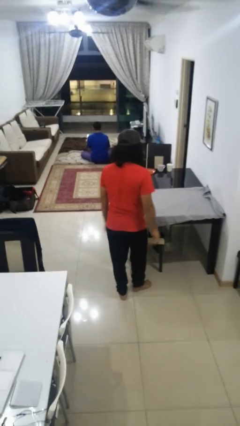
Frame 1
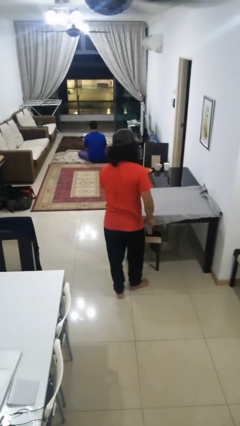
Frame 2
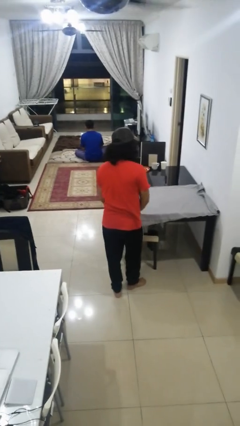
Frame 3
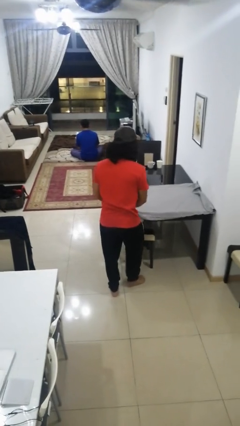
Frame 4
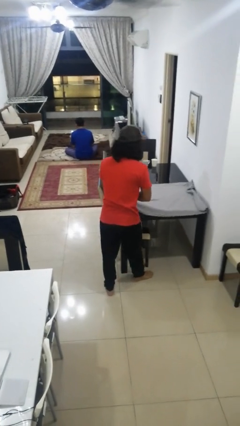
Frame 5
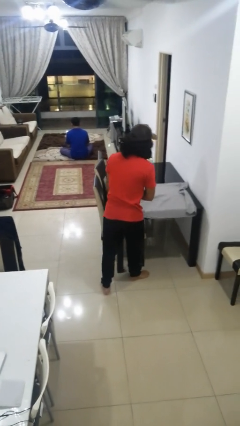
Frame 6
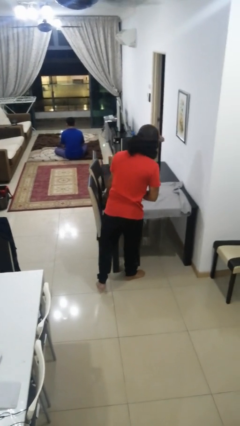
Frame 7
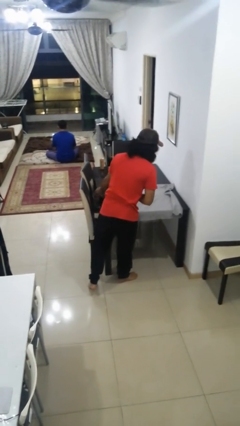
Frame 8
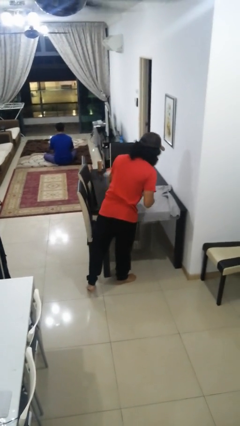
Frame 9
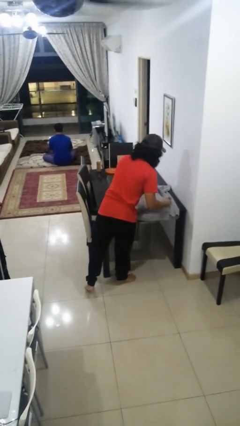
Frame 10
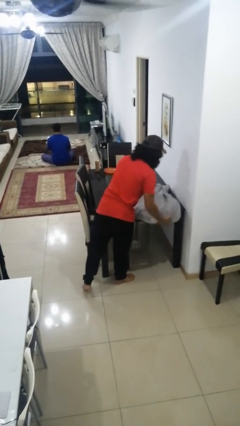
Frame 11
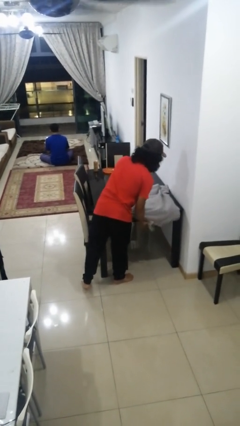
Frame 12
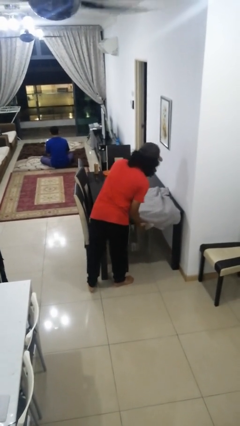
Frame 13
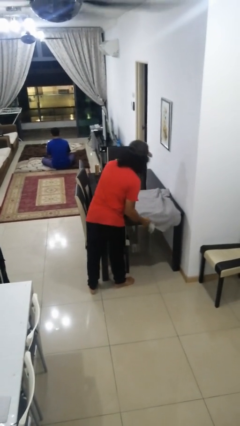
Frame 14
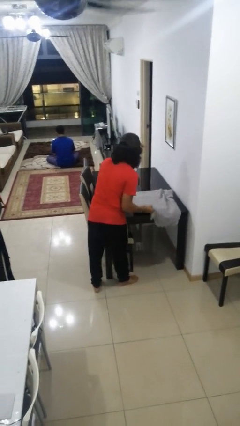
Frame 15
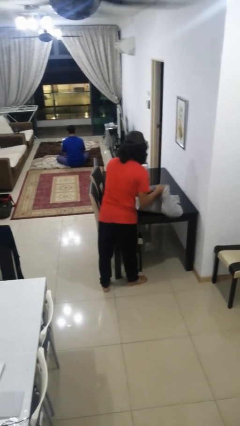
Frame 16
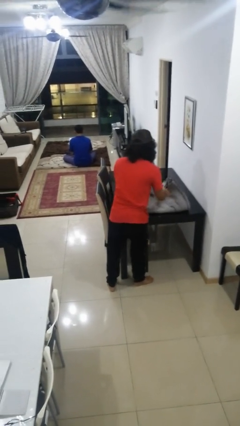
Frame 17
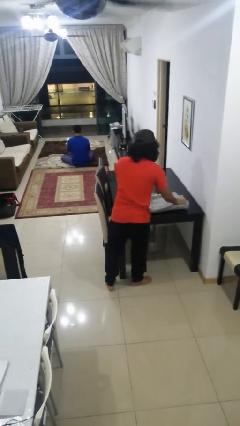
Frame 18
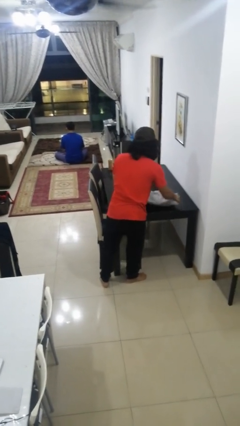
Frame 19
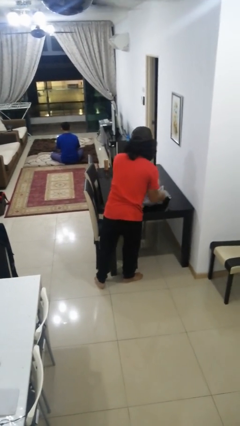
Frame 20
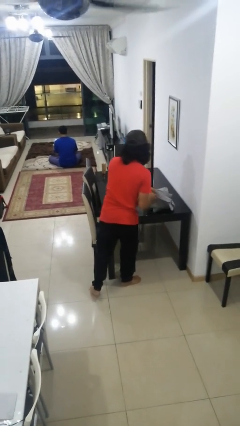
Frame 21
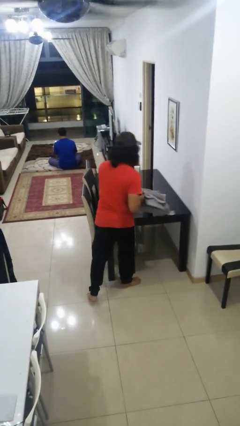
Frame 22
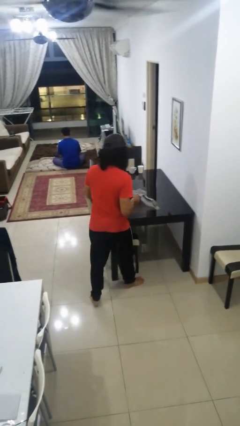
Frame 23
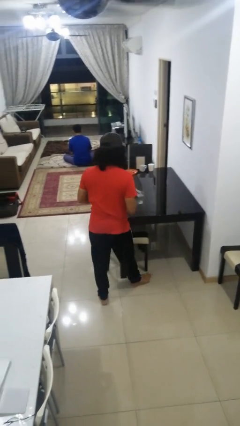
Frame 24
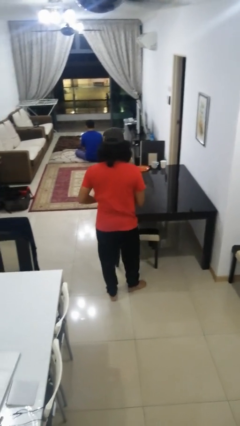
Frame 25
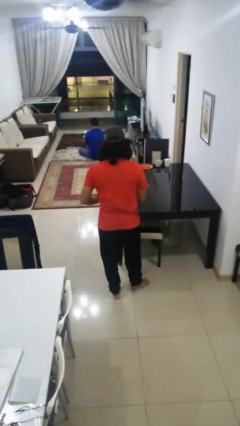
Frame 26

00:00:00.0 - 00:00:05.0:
person folds tablecloth

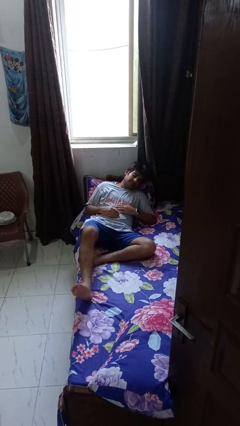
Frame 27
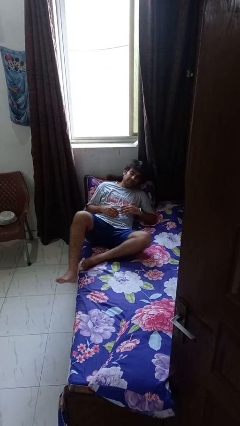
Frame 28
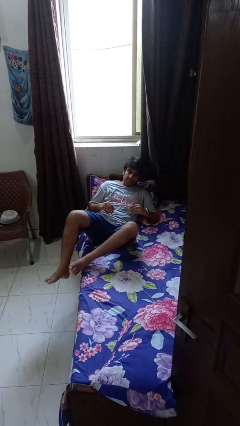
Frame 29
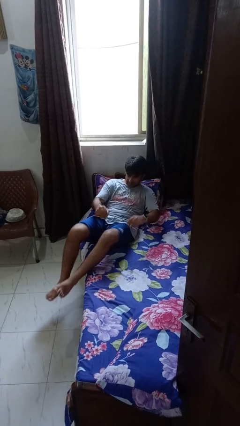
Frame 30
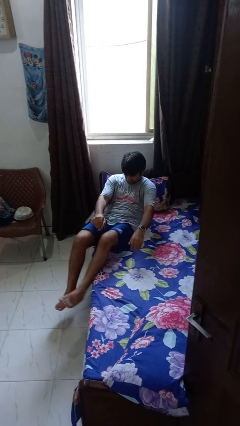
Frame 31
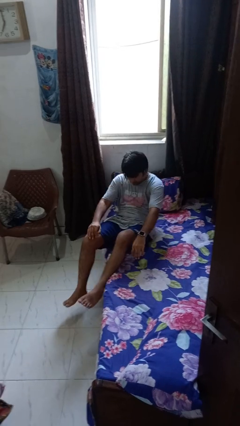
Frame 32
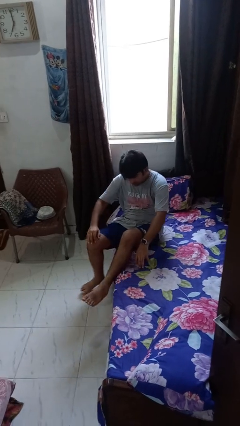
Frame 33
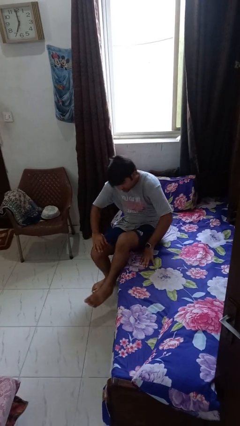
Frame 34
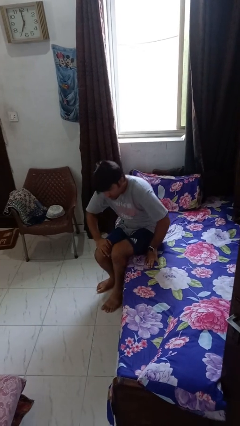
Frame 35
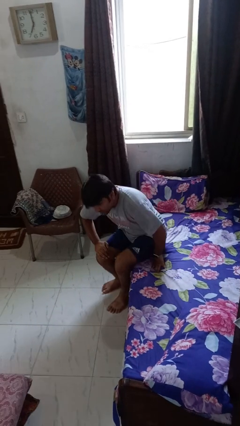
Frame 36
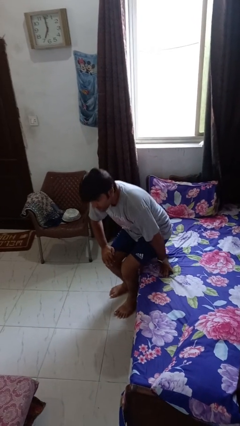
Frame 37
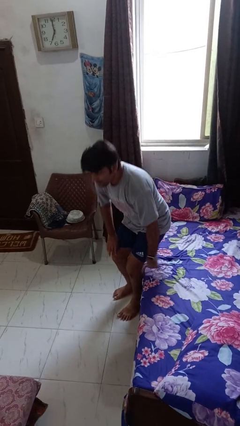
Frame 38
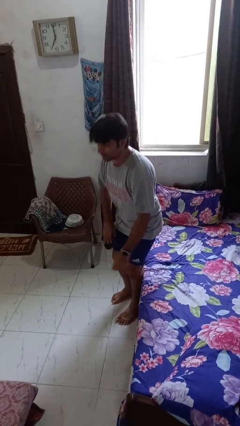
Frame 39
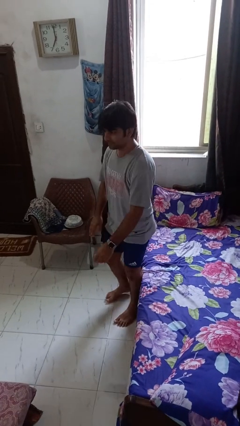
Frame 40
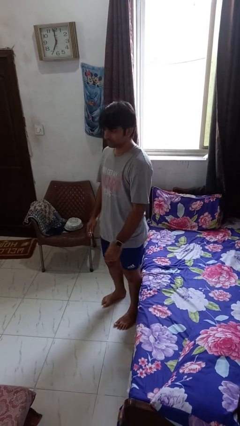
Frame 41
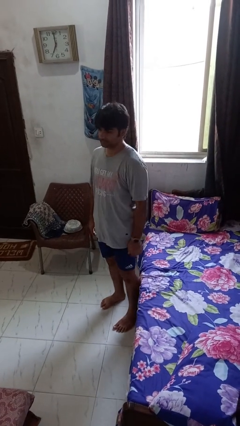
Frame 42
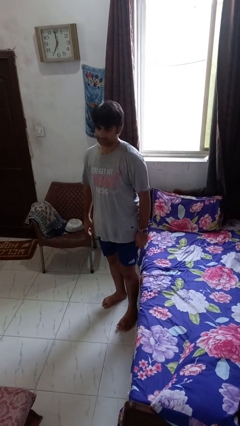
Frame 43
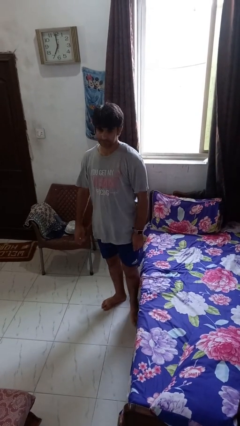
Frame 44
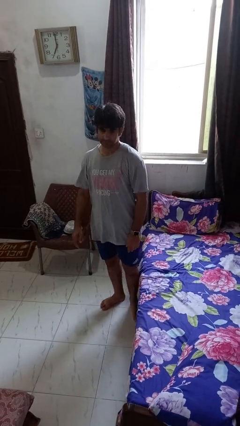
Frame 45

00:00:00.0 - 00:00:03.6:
person stands up

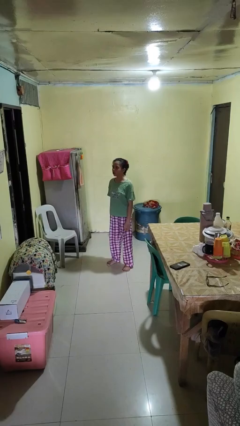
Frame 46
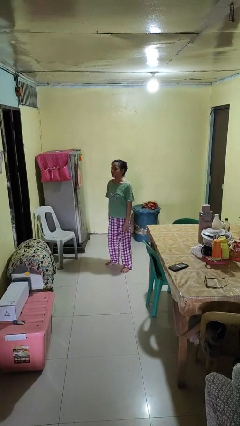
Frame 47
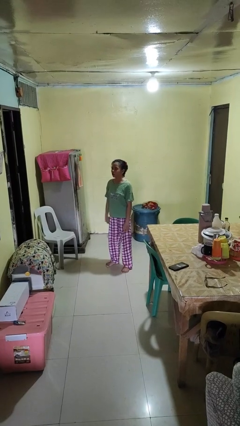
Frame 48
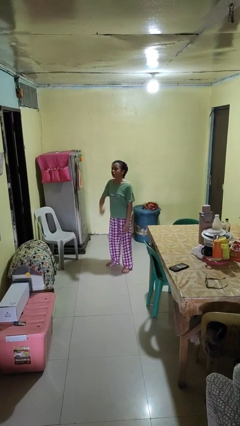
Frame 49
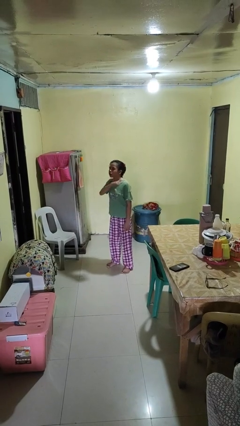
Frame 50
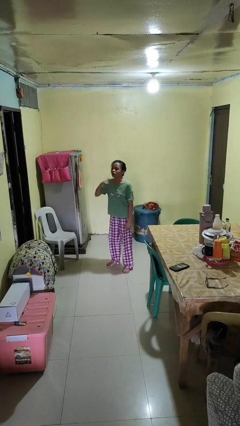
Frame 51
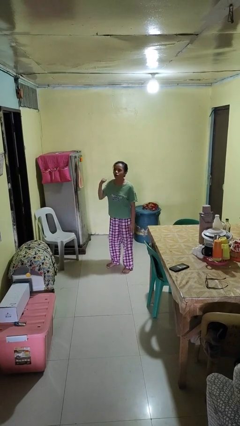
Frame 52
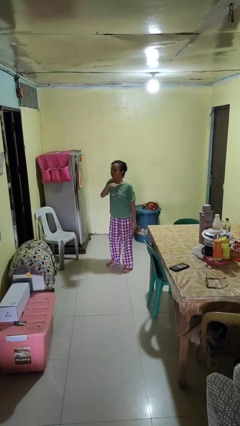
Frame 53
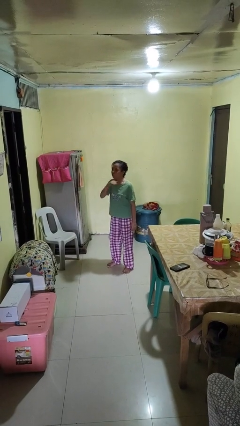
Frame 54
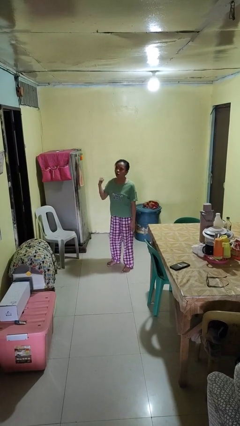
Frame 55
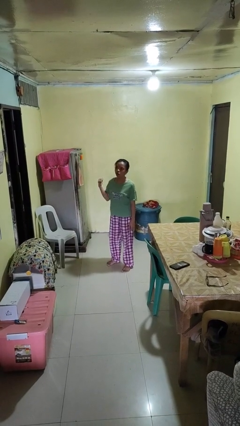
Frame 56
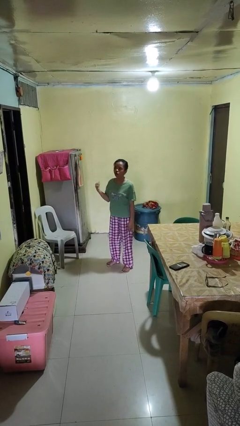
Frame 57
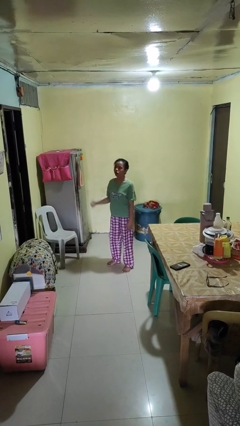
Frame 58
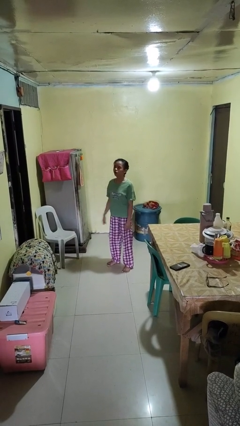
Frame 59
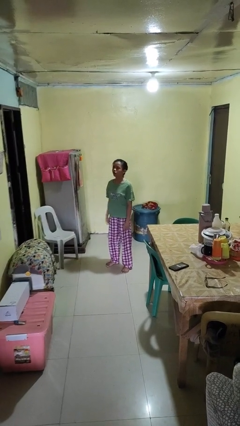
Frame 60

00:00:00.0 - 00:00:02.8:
person gestures cut

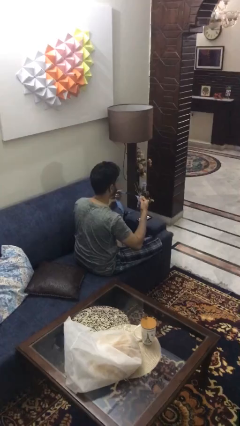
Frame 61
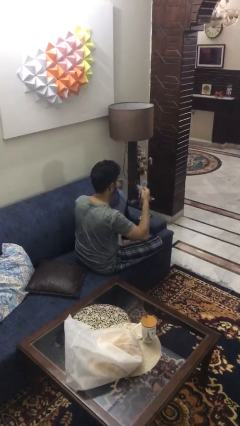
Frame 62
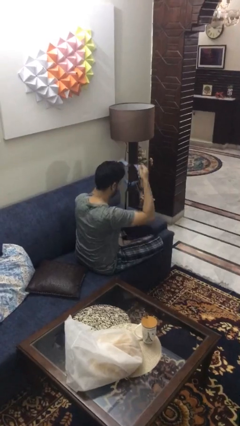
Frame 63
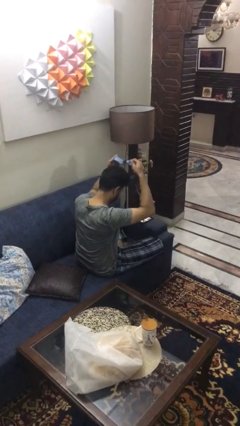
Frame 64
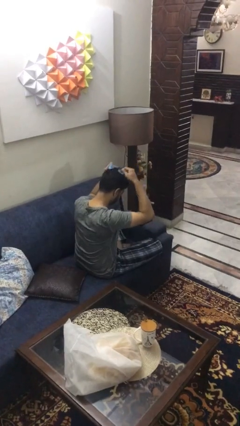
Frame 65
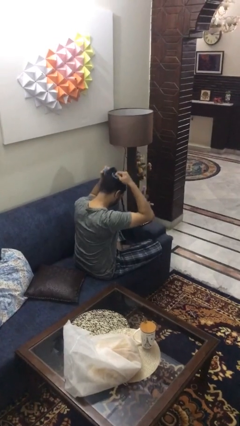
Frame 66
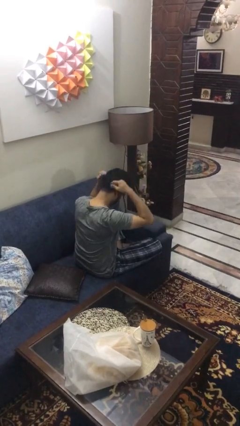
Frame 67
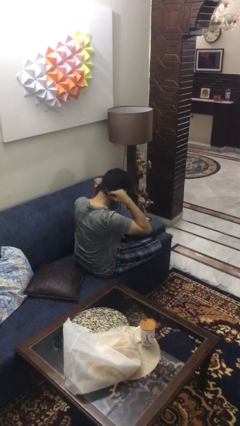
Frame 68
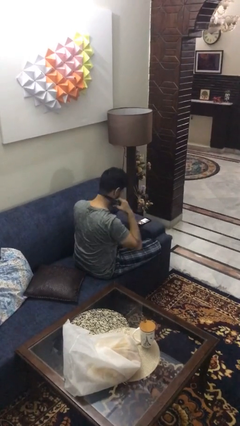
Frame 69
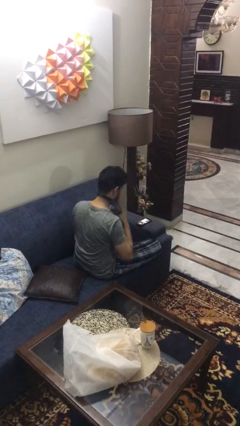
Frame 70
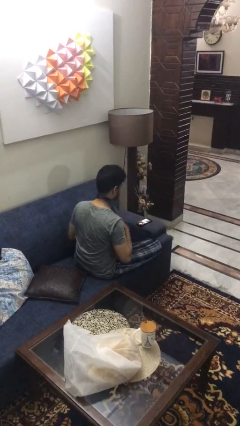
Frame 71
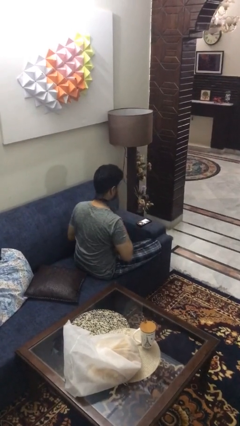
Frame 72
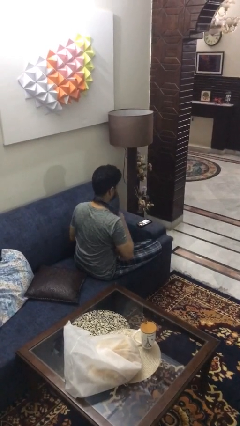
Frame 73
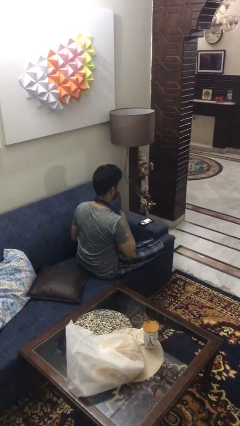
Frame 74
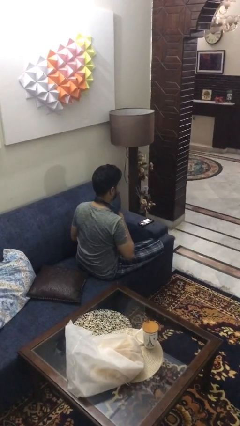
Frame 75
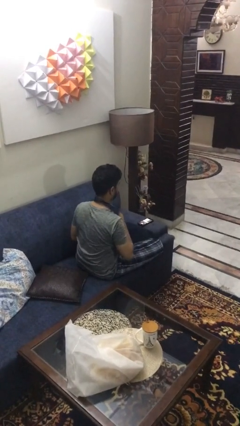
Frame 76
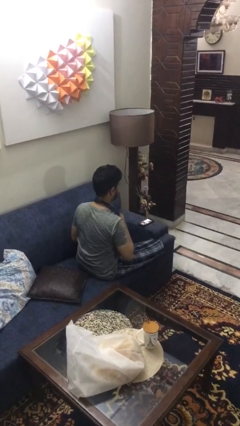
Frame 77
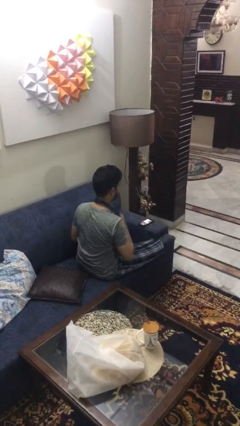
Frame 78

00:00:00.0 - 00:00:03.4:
person puts on necktie

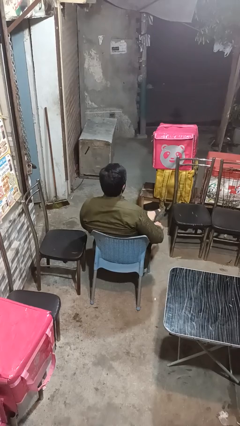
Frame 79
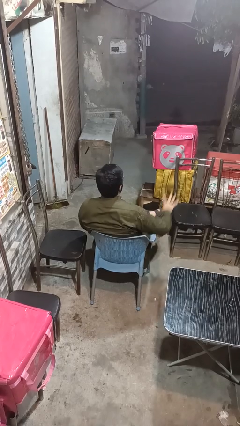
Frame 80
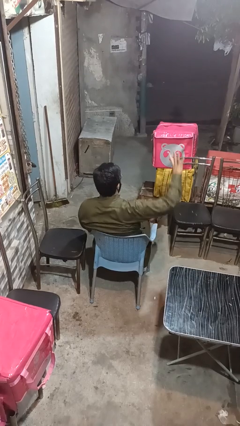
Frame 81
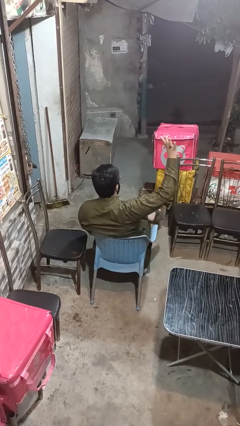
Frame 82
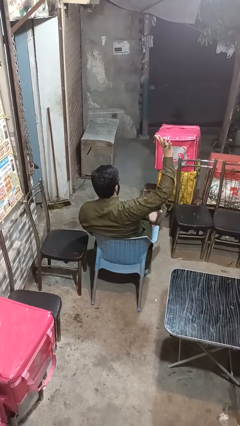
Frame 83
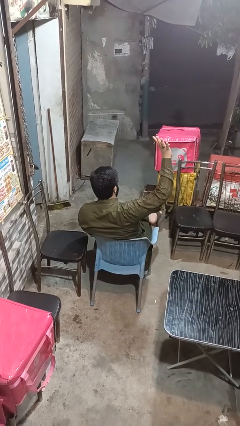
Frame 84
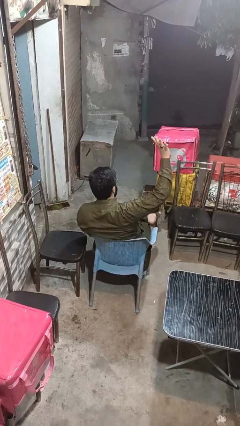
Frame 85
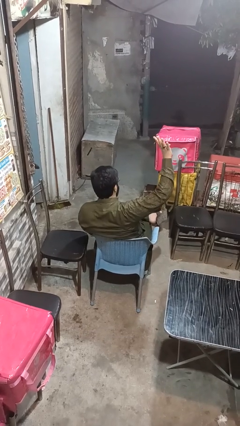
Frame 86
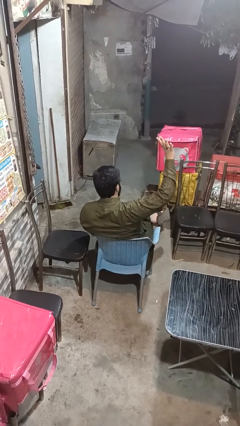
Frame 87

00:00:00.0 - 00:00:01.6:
person gestures number four

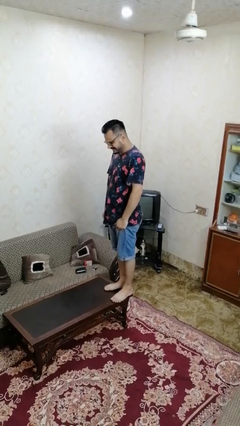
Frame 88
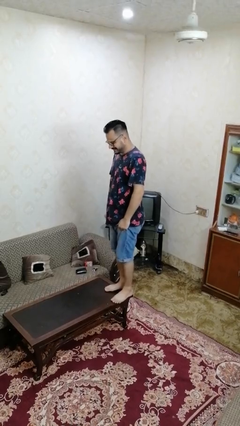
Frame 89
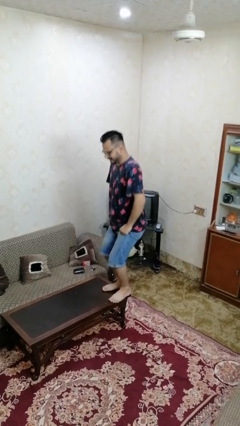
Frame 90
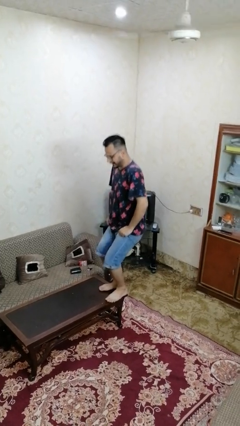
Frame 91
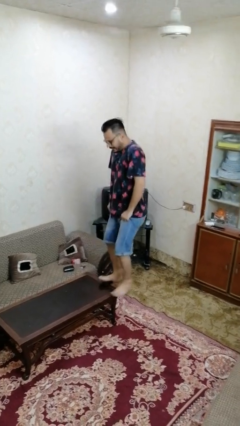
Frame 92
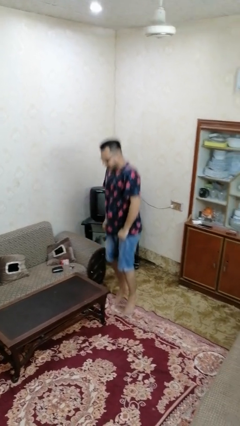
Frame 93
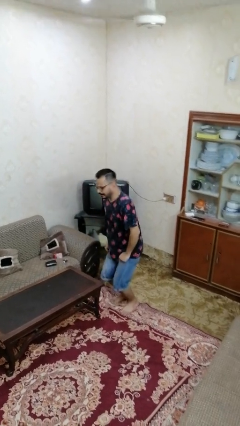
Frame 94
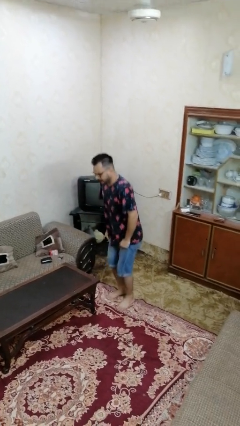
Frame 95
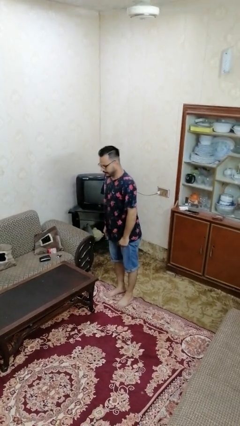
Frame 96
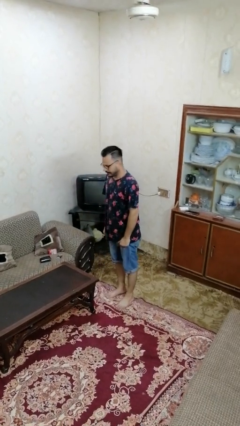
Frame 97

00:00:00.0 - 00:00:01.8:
person climbs off table
